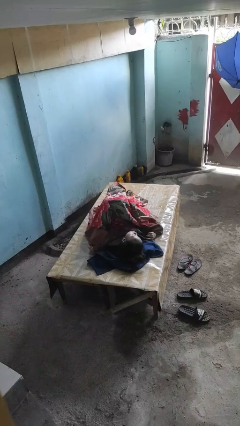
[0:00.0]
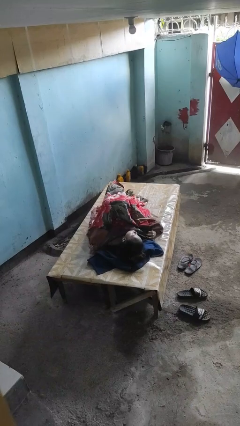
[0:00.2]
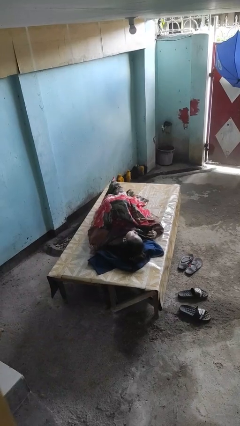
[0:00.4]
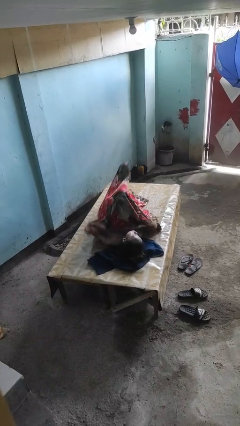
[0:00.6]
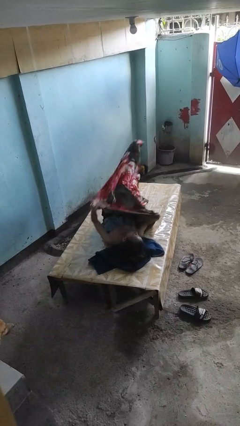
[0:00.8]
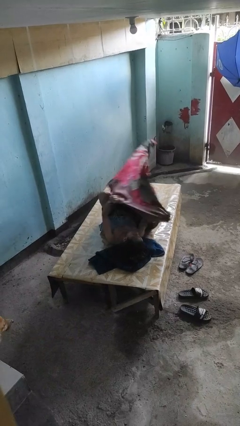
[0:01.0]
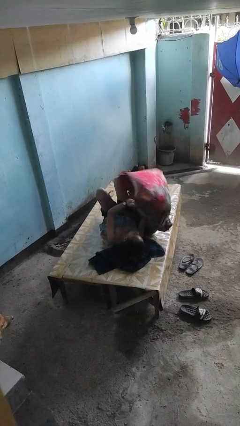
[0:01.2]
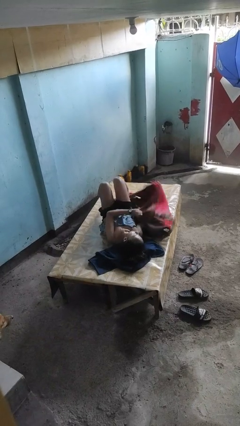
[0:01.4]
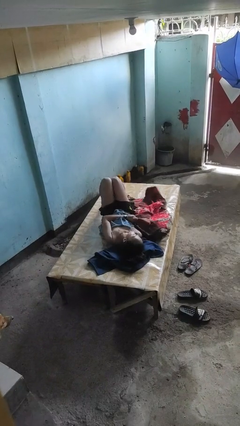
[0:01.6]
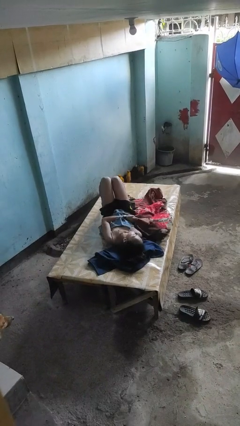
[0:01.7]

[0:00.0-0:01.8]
person uncovers with blanket

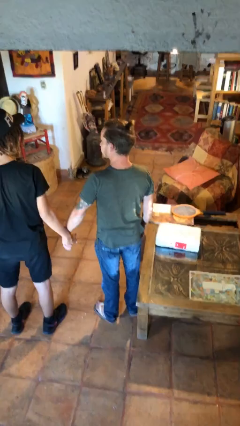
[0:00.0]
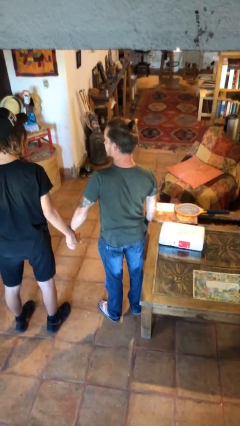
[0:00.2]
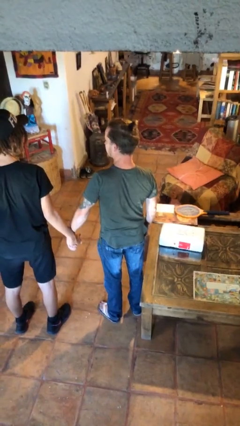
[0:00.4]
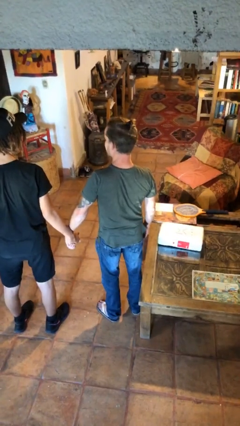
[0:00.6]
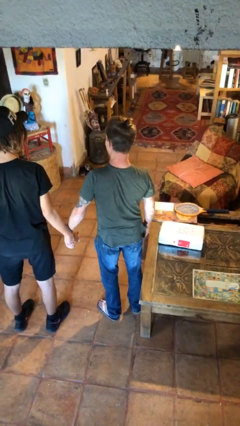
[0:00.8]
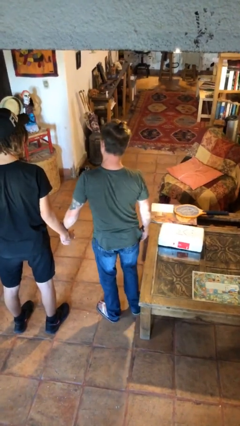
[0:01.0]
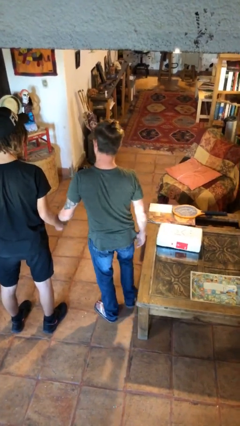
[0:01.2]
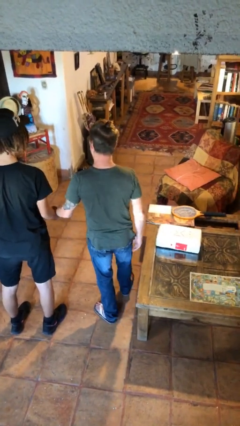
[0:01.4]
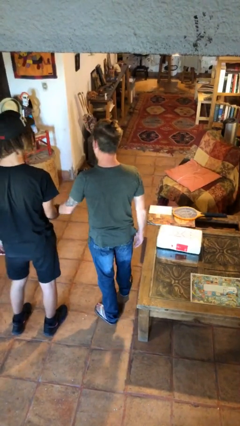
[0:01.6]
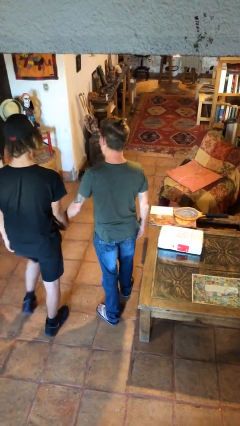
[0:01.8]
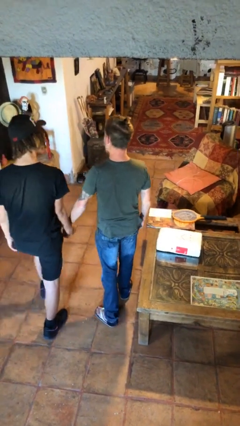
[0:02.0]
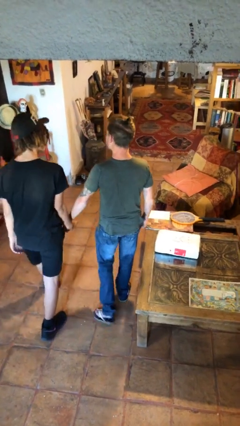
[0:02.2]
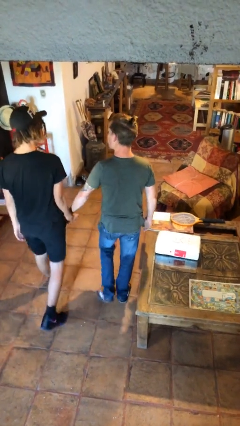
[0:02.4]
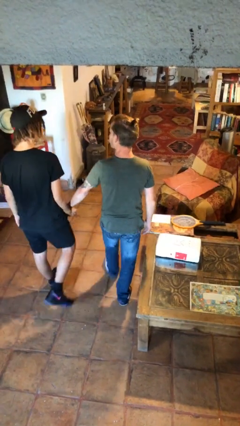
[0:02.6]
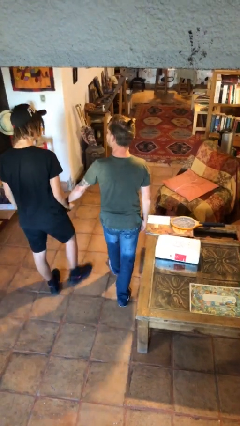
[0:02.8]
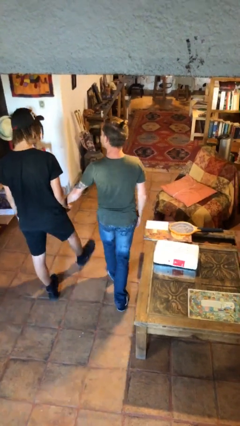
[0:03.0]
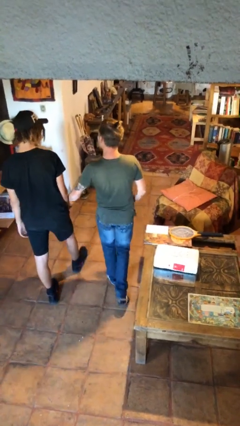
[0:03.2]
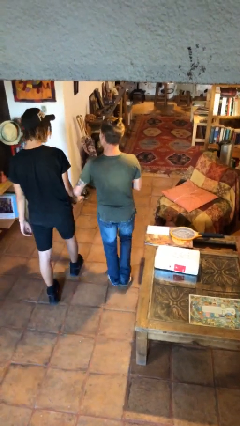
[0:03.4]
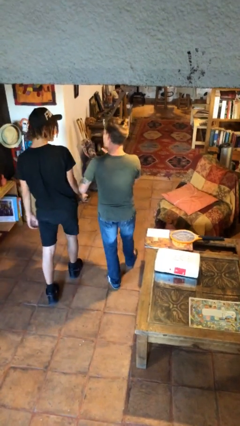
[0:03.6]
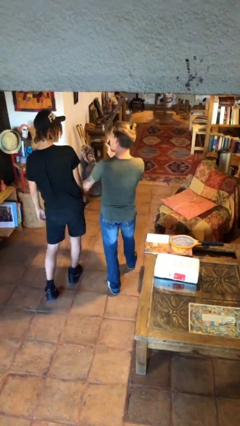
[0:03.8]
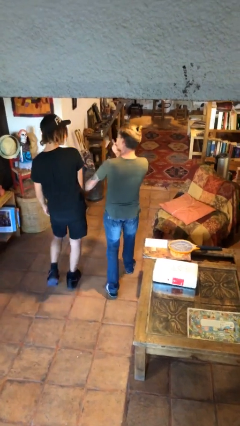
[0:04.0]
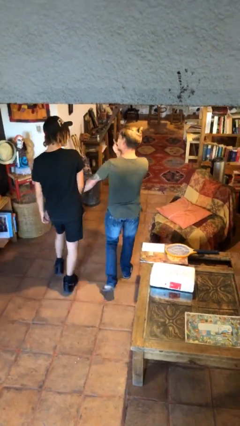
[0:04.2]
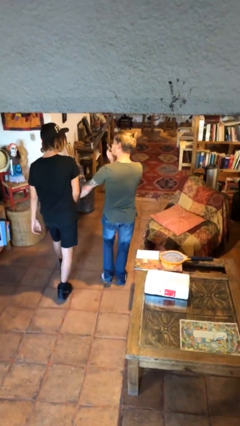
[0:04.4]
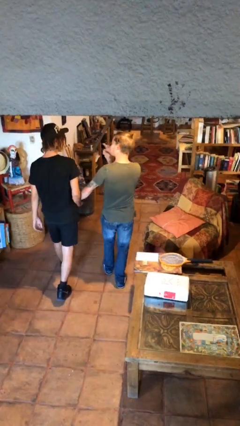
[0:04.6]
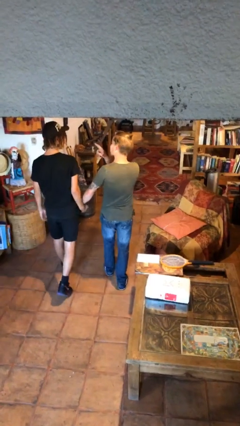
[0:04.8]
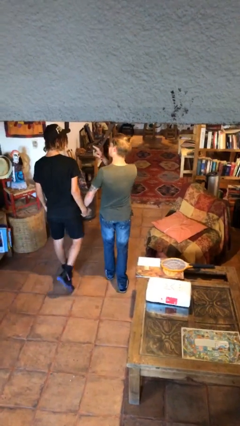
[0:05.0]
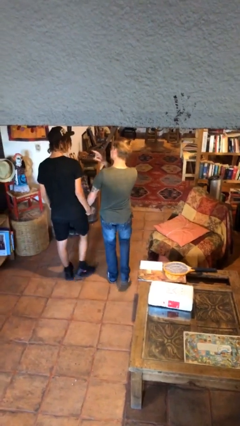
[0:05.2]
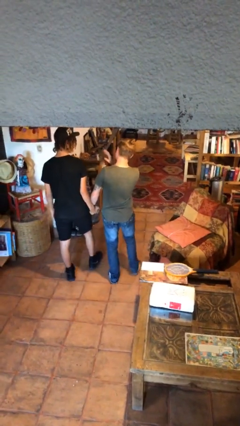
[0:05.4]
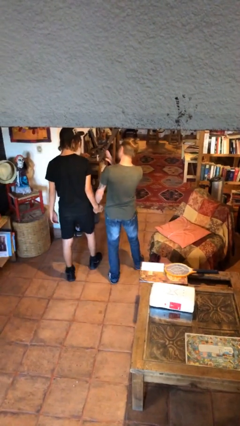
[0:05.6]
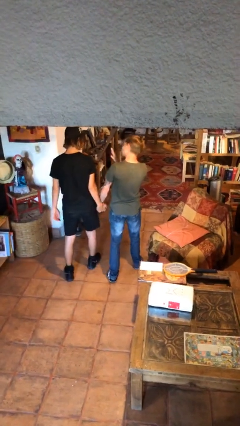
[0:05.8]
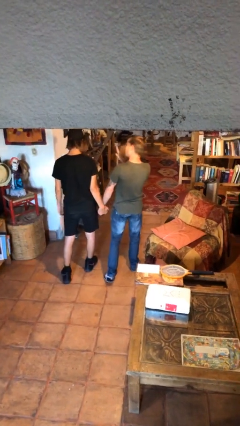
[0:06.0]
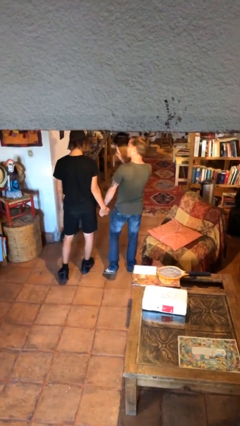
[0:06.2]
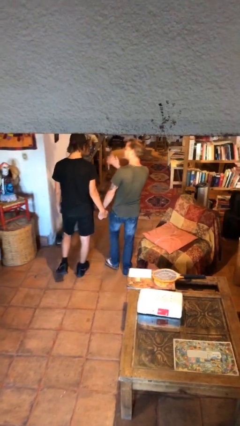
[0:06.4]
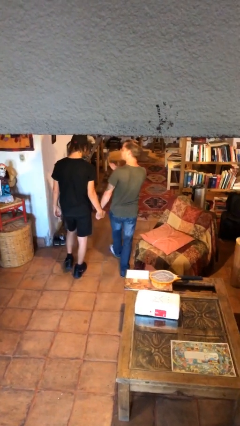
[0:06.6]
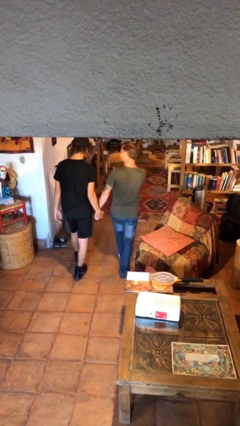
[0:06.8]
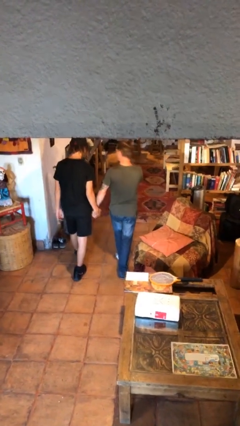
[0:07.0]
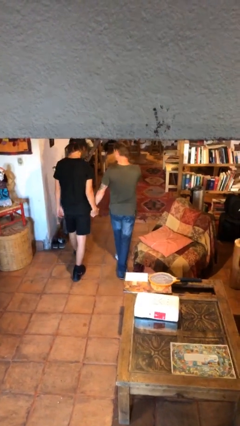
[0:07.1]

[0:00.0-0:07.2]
person holds hand

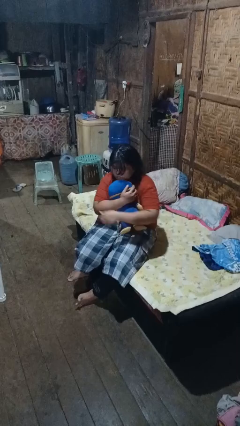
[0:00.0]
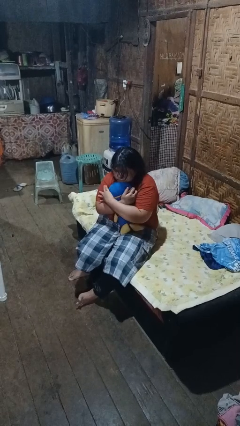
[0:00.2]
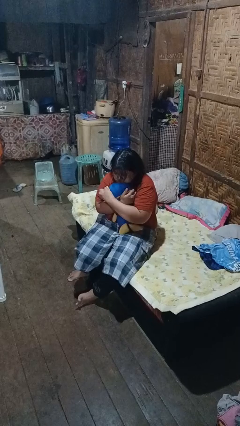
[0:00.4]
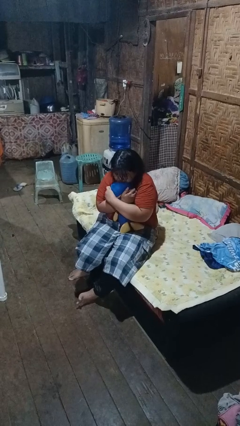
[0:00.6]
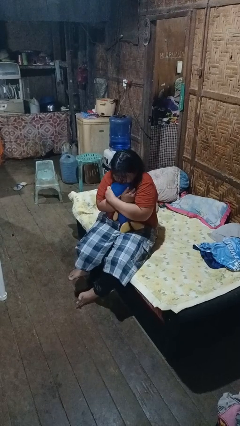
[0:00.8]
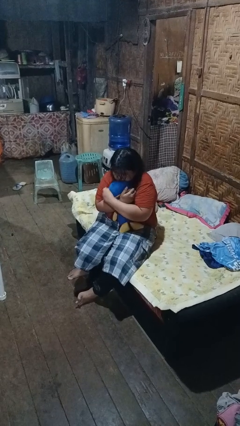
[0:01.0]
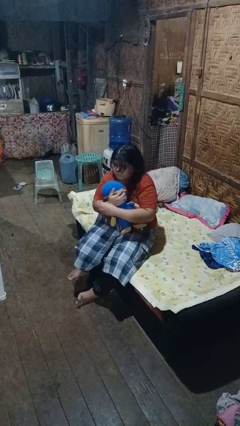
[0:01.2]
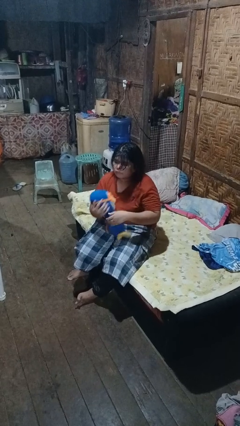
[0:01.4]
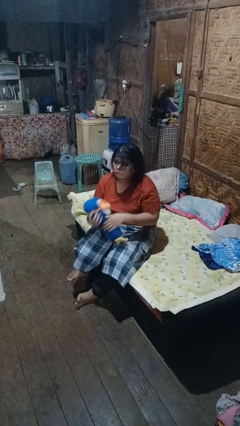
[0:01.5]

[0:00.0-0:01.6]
person hugs stuffed animal

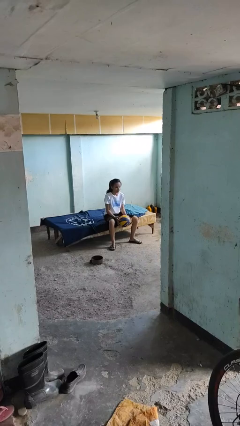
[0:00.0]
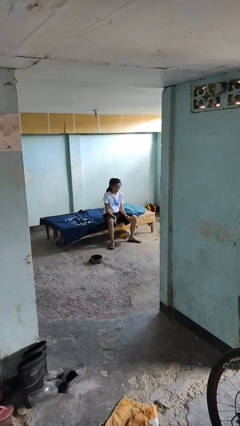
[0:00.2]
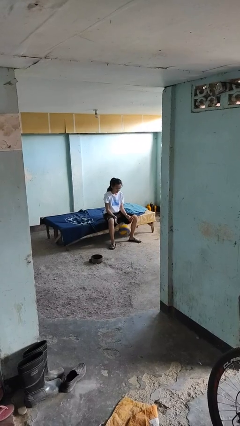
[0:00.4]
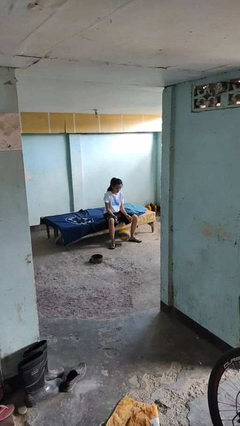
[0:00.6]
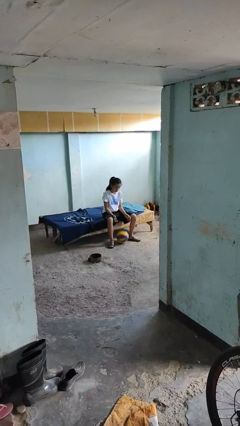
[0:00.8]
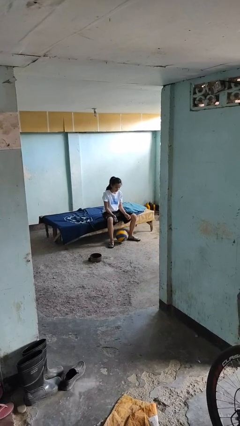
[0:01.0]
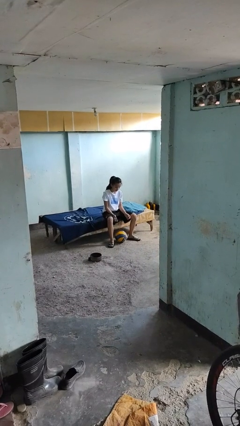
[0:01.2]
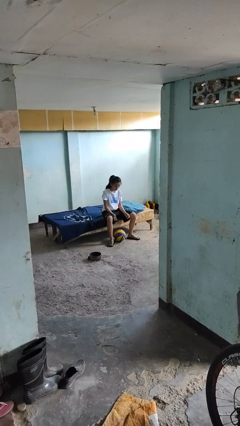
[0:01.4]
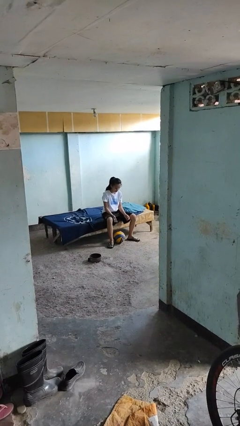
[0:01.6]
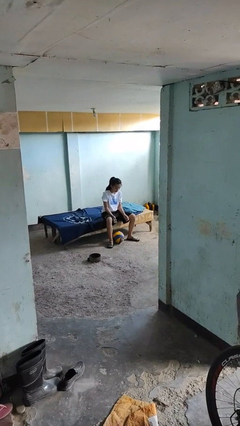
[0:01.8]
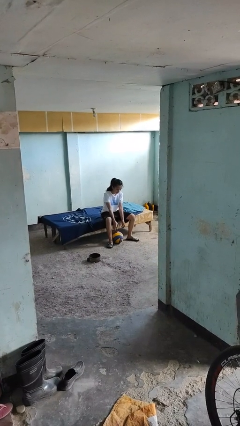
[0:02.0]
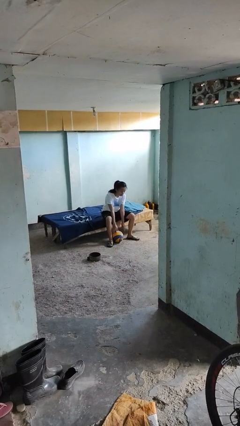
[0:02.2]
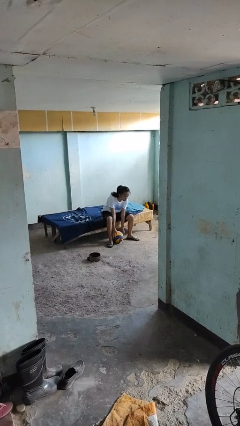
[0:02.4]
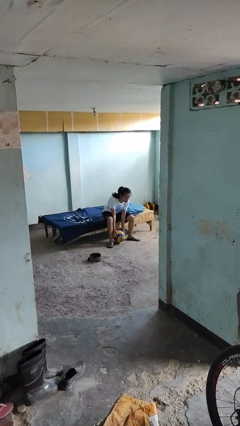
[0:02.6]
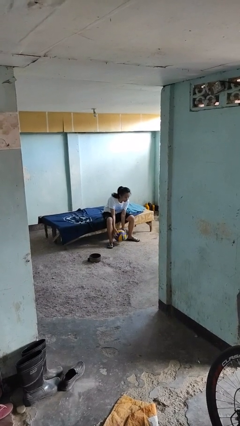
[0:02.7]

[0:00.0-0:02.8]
person drops object

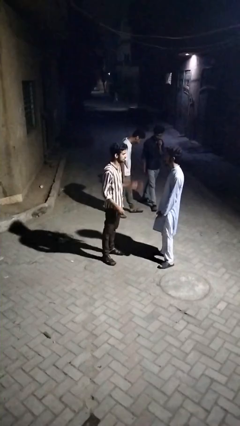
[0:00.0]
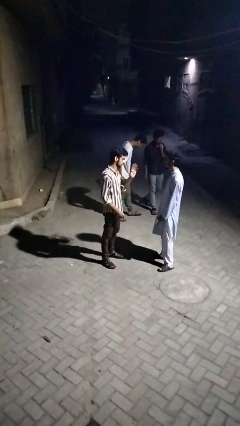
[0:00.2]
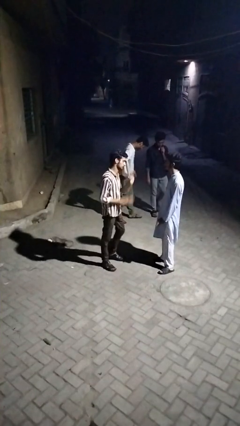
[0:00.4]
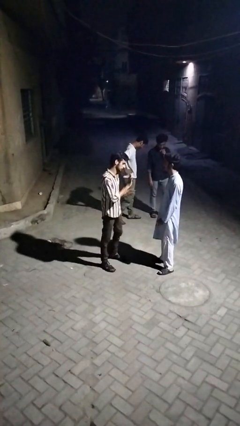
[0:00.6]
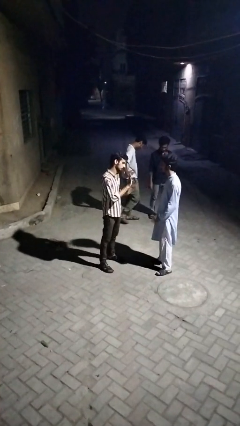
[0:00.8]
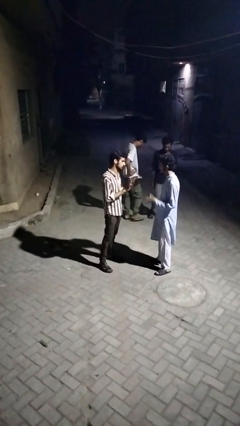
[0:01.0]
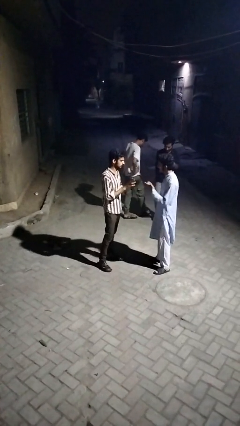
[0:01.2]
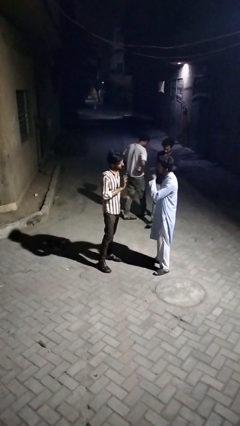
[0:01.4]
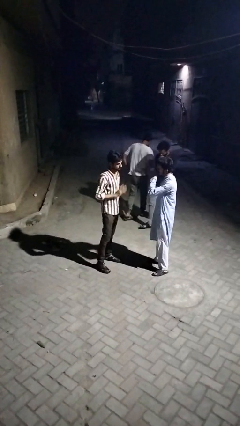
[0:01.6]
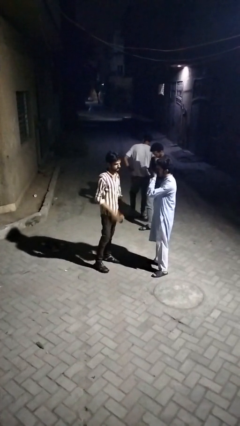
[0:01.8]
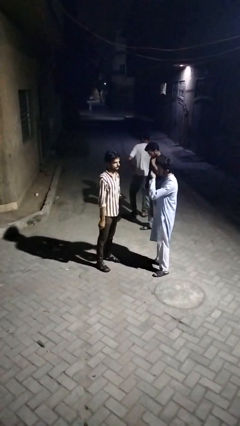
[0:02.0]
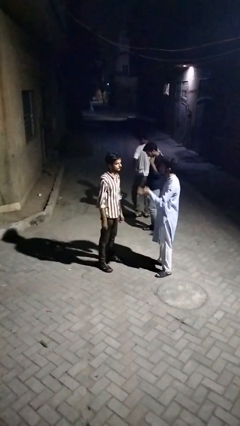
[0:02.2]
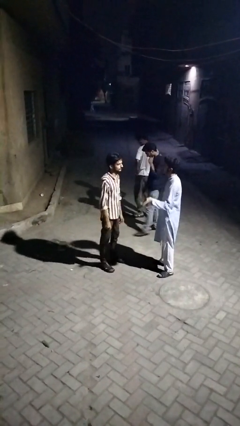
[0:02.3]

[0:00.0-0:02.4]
person talks to person

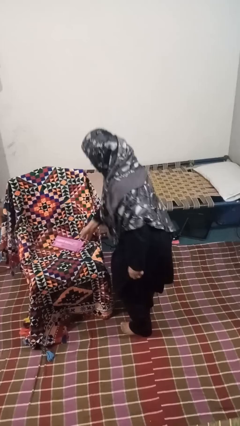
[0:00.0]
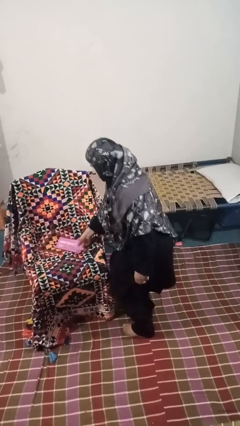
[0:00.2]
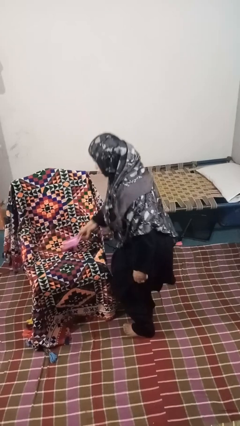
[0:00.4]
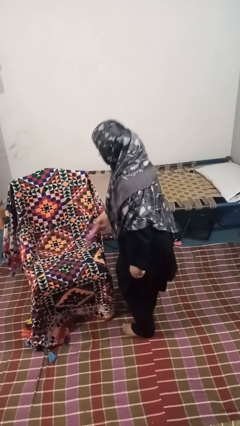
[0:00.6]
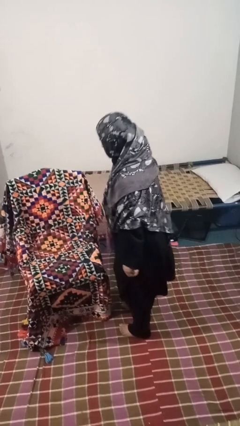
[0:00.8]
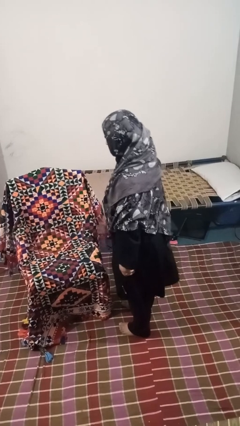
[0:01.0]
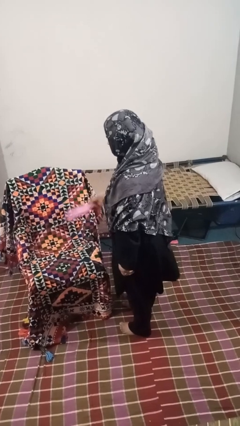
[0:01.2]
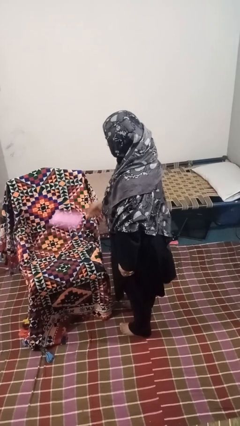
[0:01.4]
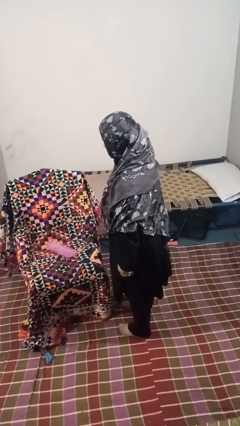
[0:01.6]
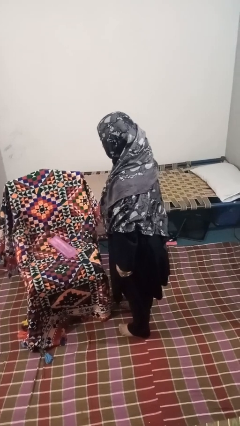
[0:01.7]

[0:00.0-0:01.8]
person picks up object from couch
